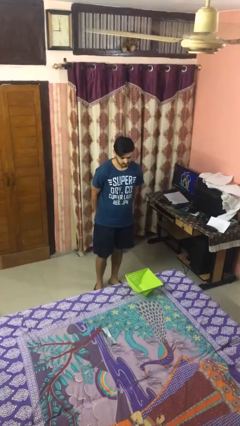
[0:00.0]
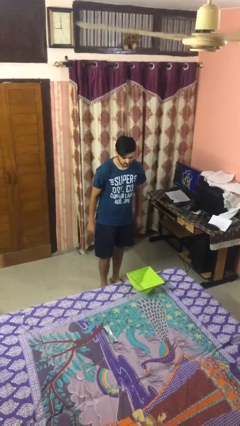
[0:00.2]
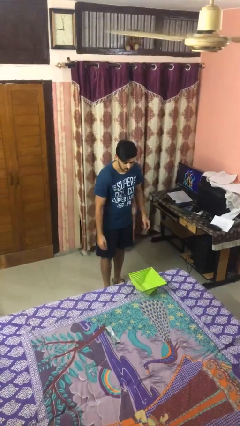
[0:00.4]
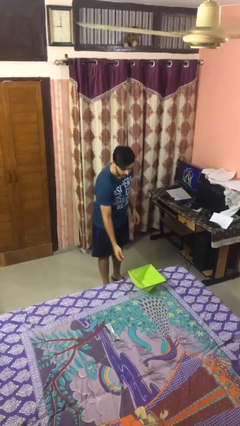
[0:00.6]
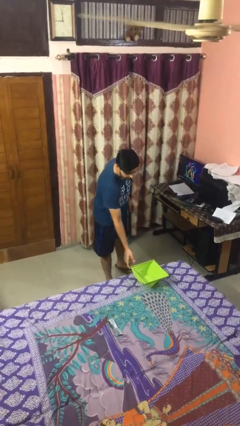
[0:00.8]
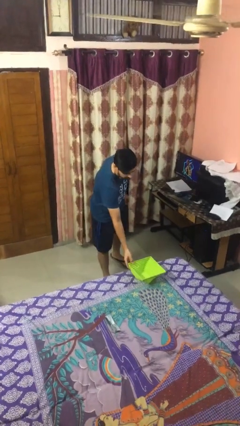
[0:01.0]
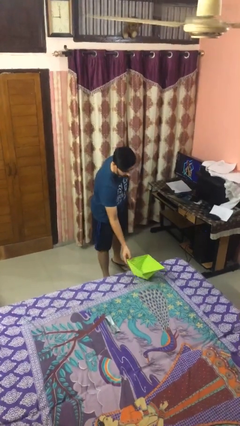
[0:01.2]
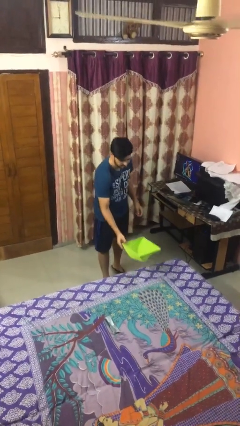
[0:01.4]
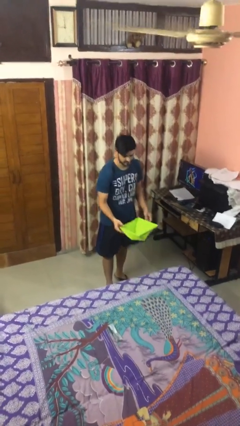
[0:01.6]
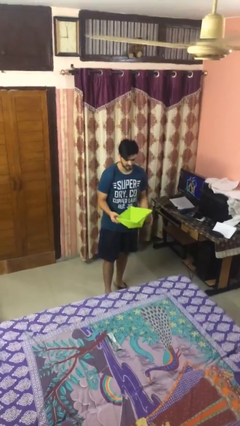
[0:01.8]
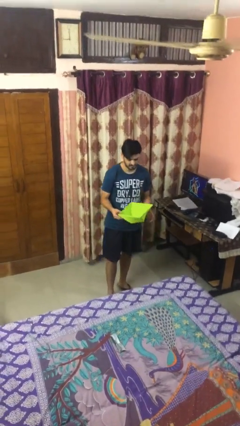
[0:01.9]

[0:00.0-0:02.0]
person picks up object from bed

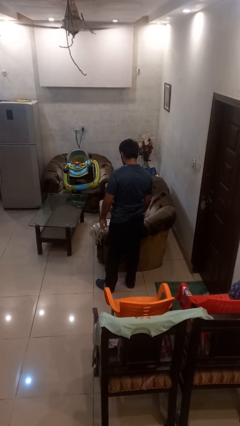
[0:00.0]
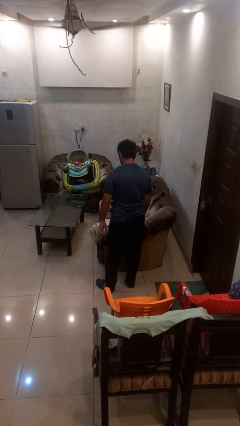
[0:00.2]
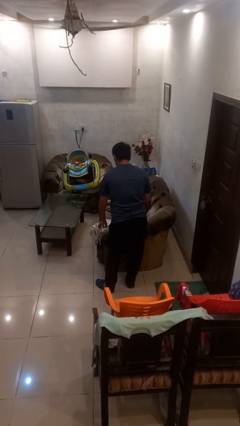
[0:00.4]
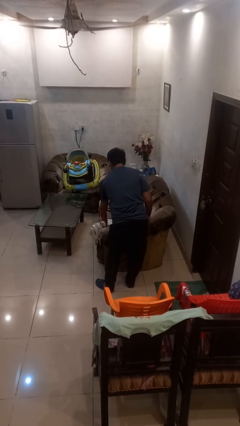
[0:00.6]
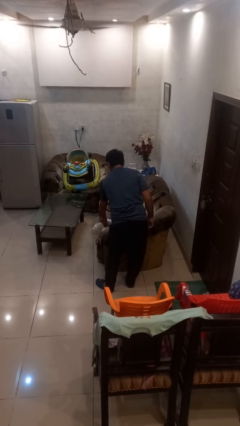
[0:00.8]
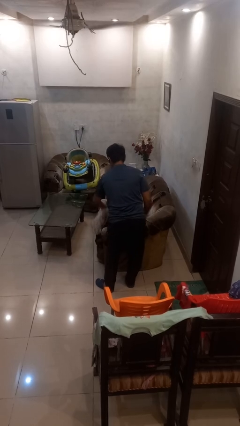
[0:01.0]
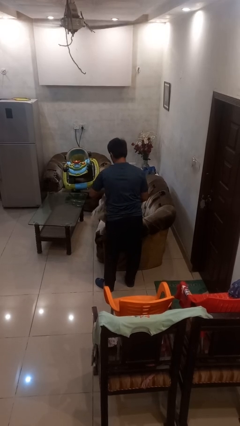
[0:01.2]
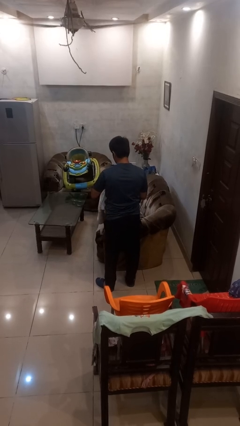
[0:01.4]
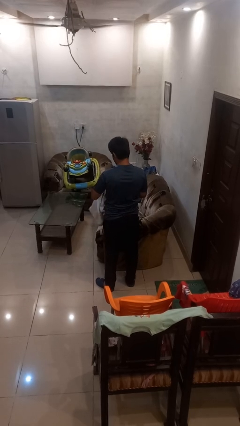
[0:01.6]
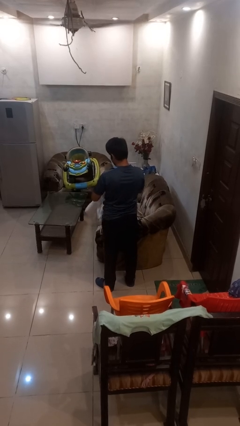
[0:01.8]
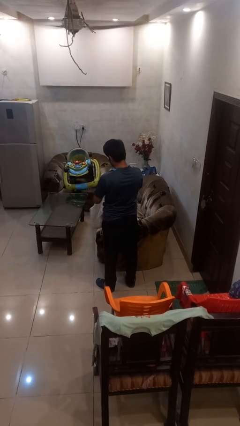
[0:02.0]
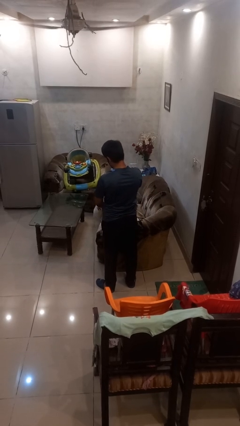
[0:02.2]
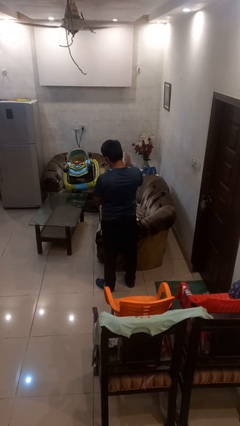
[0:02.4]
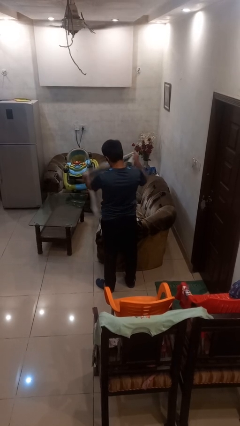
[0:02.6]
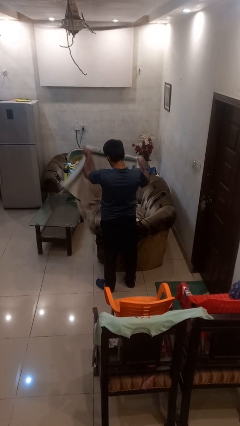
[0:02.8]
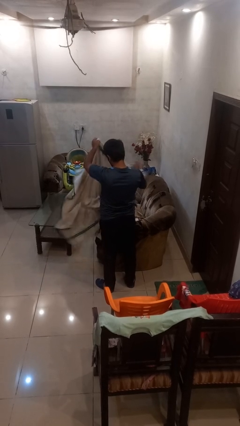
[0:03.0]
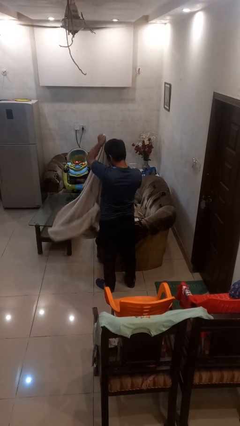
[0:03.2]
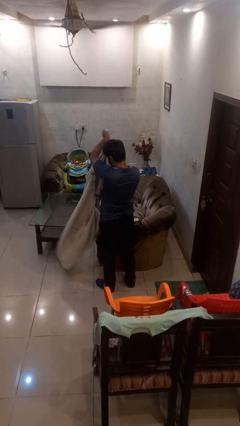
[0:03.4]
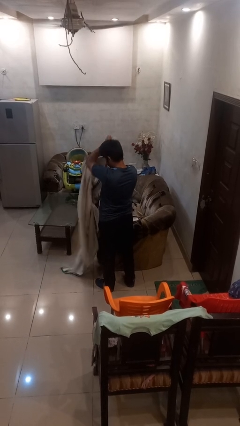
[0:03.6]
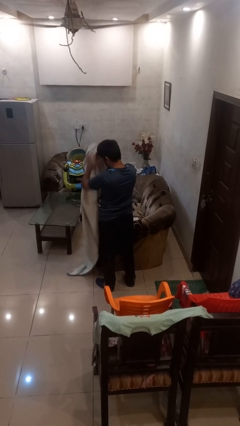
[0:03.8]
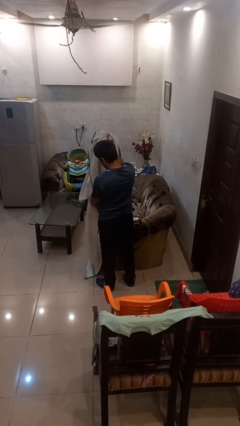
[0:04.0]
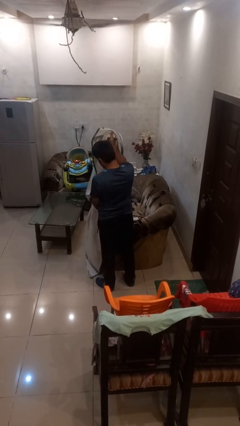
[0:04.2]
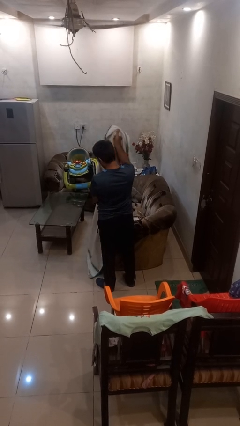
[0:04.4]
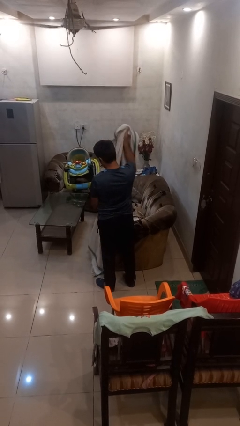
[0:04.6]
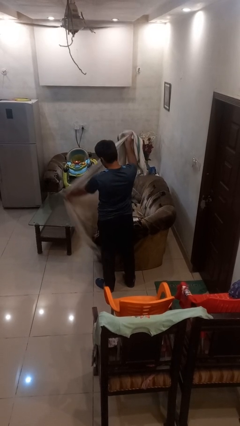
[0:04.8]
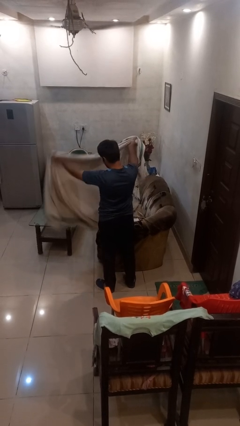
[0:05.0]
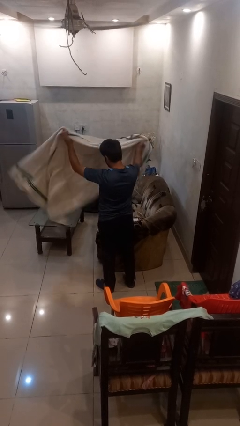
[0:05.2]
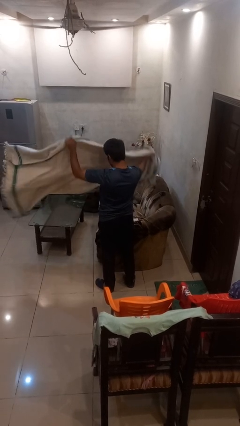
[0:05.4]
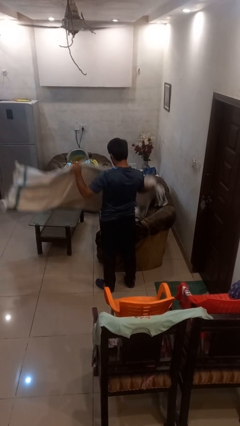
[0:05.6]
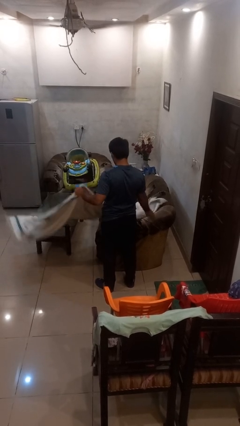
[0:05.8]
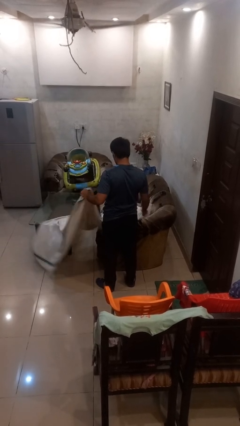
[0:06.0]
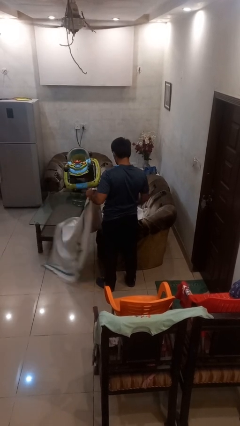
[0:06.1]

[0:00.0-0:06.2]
person unfolds blanket

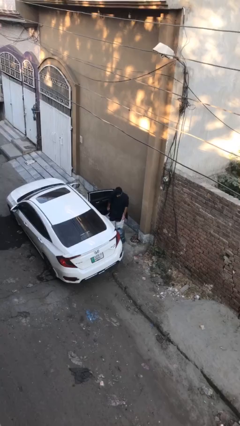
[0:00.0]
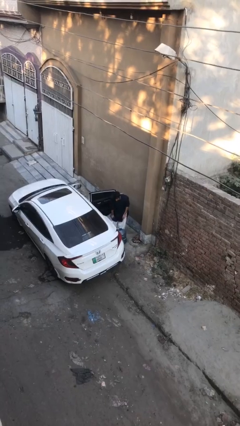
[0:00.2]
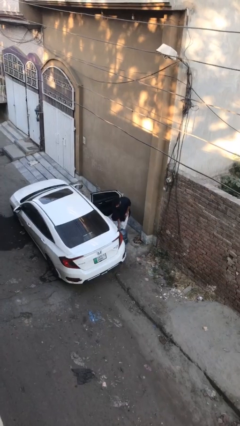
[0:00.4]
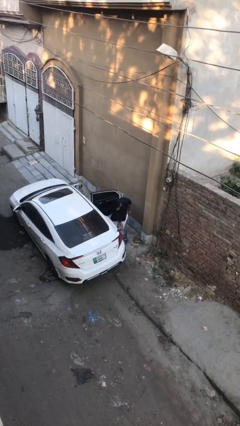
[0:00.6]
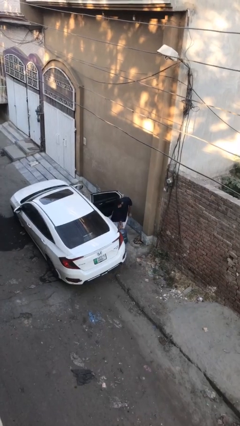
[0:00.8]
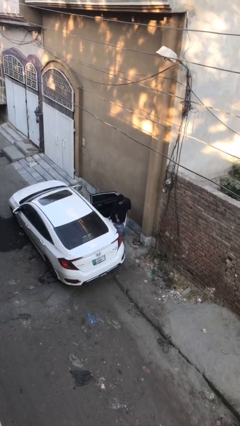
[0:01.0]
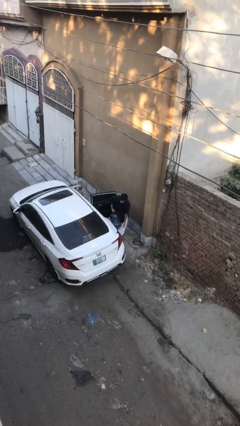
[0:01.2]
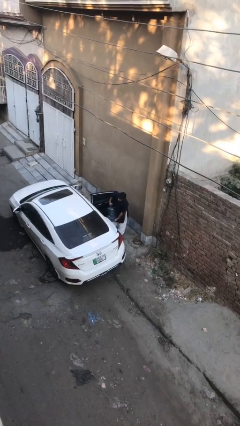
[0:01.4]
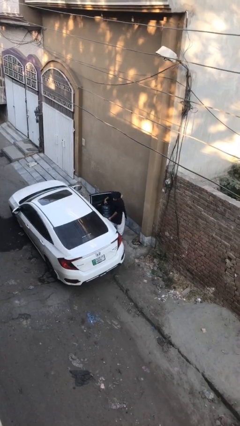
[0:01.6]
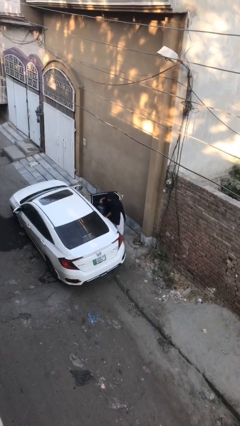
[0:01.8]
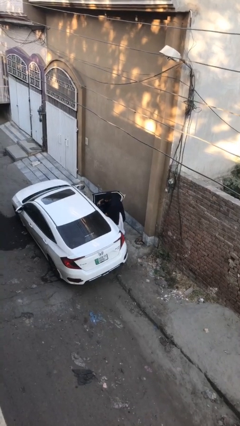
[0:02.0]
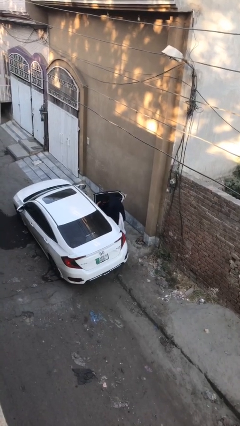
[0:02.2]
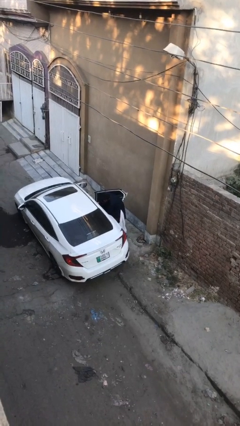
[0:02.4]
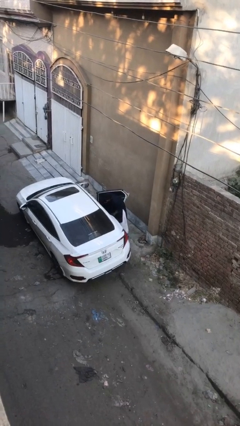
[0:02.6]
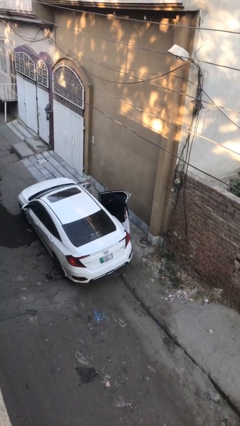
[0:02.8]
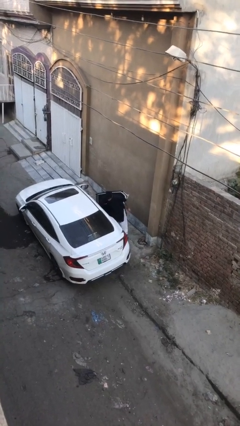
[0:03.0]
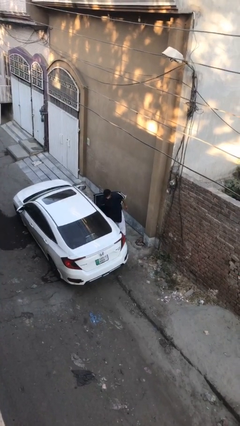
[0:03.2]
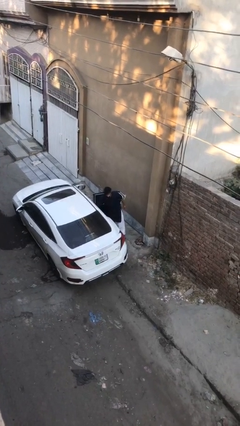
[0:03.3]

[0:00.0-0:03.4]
person loads car

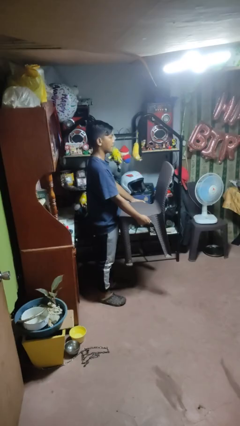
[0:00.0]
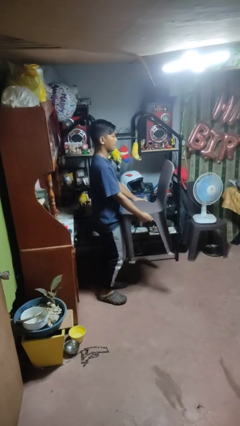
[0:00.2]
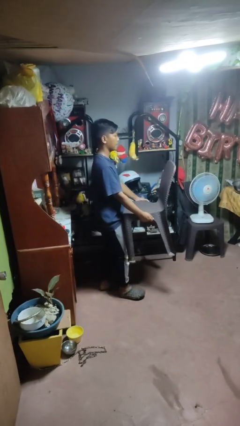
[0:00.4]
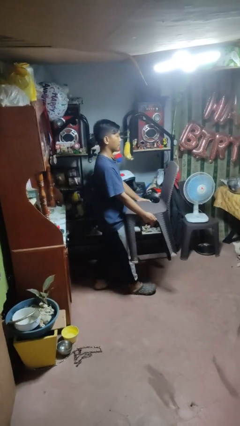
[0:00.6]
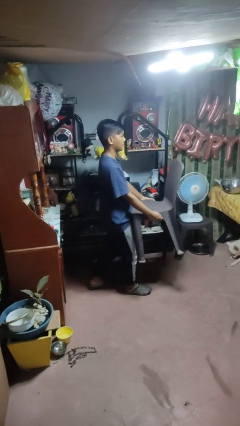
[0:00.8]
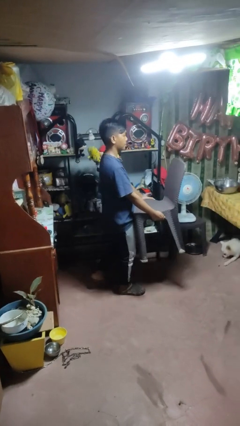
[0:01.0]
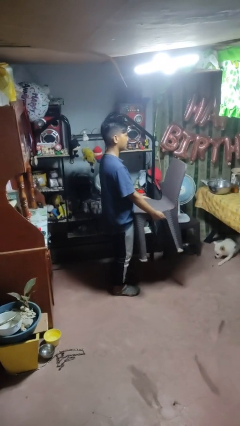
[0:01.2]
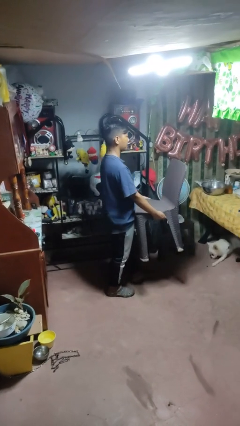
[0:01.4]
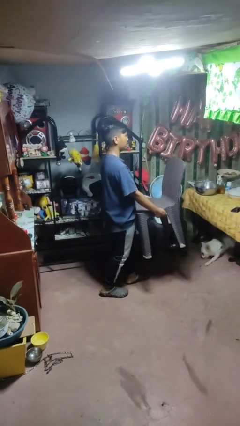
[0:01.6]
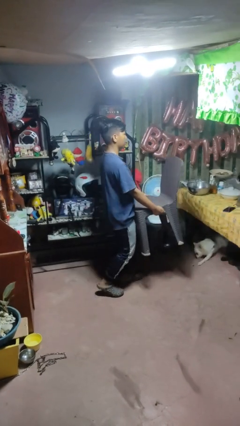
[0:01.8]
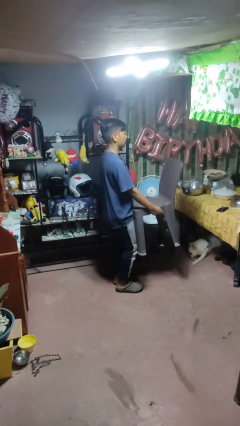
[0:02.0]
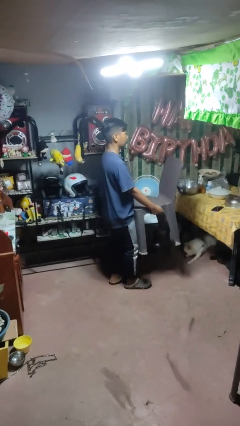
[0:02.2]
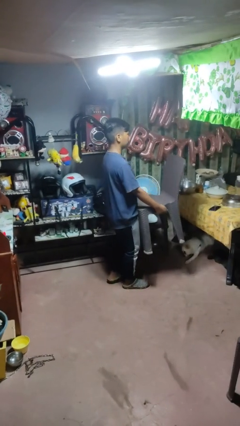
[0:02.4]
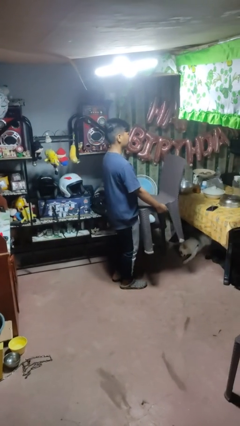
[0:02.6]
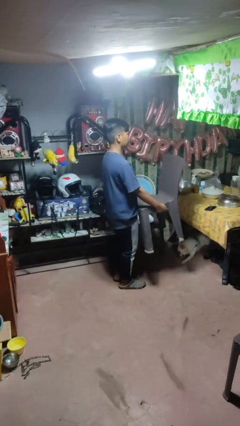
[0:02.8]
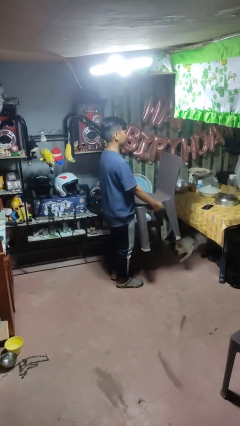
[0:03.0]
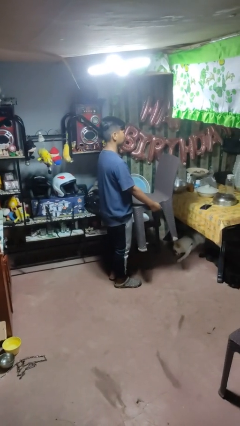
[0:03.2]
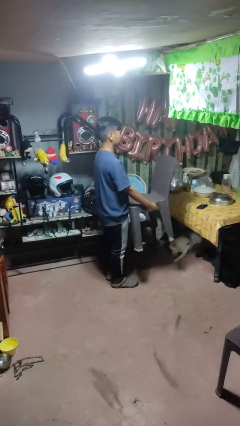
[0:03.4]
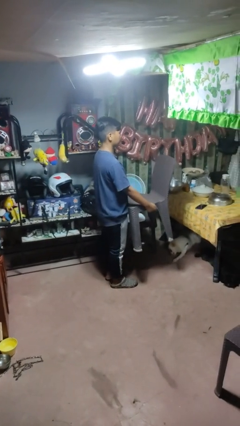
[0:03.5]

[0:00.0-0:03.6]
person carries furniture

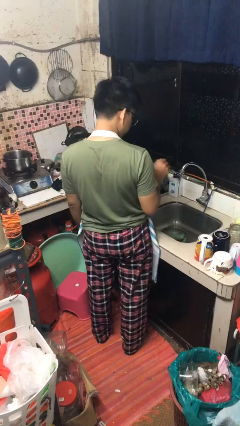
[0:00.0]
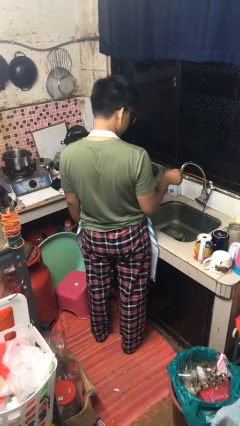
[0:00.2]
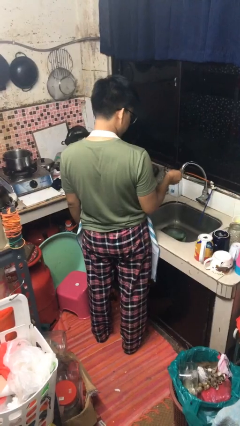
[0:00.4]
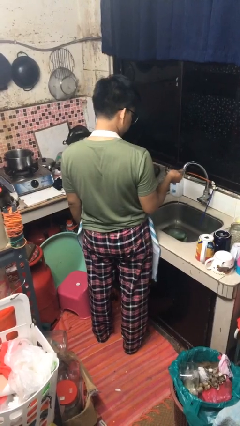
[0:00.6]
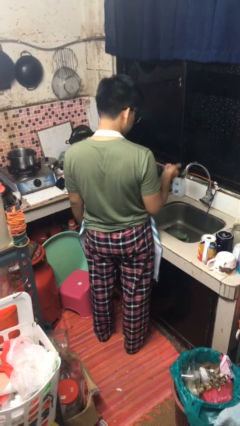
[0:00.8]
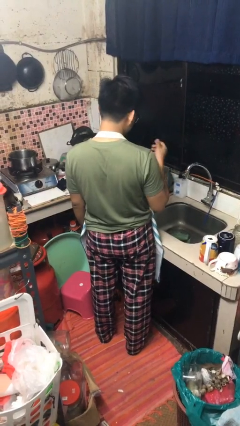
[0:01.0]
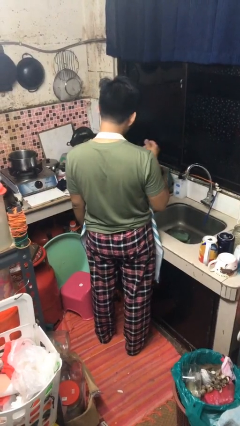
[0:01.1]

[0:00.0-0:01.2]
person turns off faucet

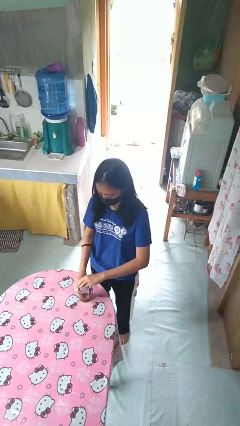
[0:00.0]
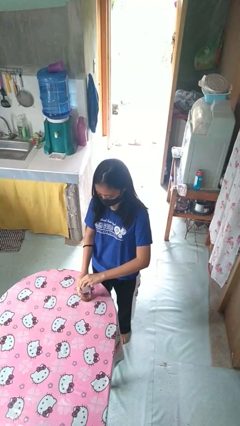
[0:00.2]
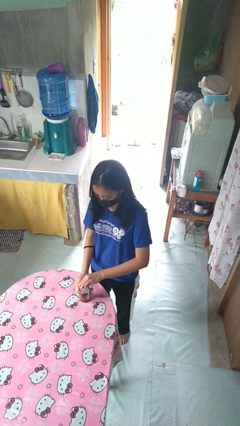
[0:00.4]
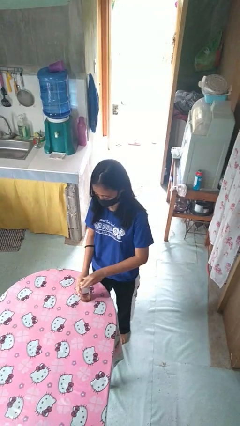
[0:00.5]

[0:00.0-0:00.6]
person opens jar

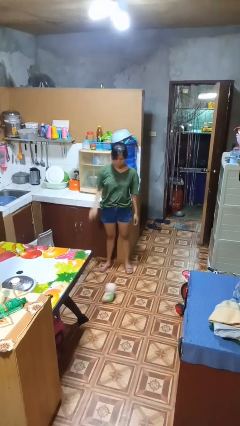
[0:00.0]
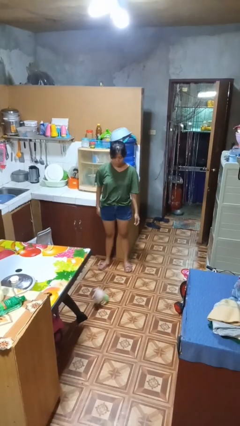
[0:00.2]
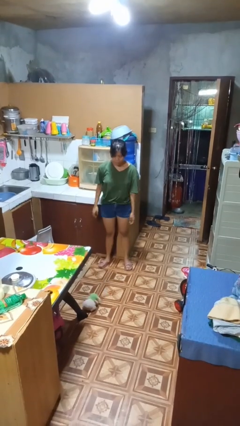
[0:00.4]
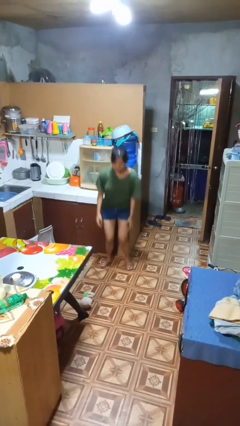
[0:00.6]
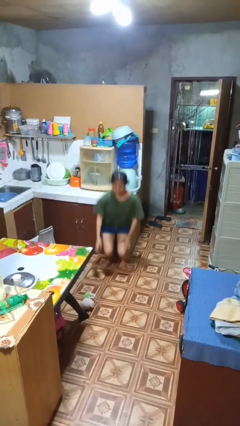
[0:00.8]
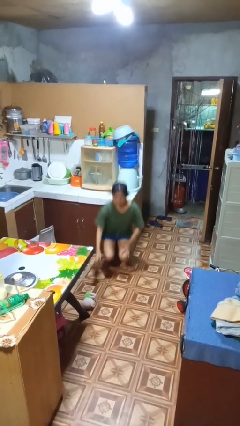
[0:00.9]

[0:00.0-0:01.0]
person picks up object from floor
